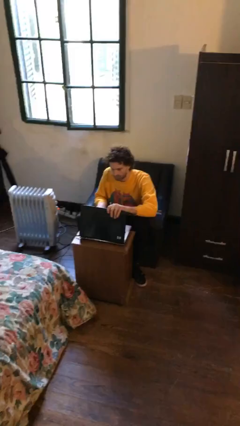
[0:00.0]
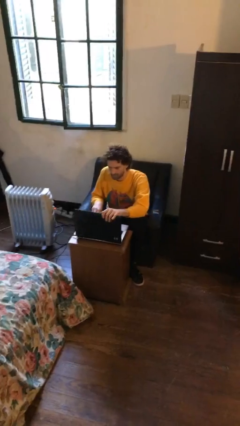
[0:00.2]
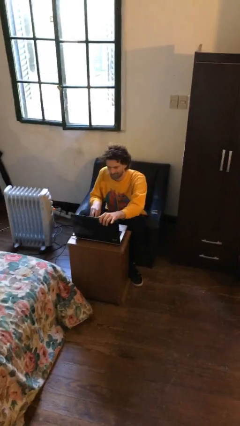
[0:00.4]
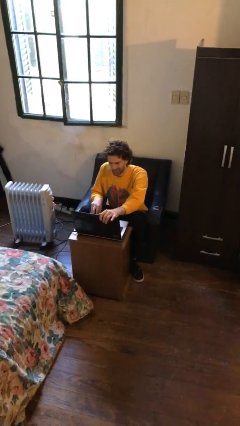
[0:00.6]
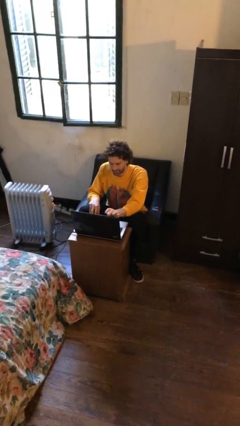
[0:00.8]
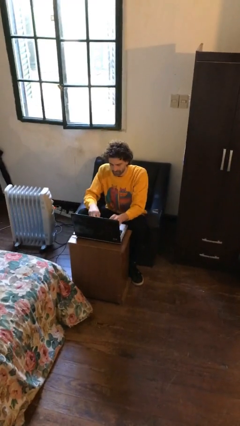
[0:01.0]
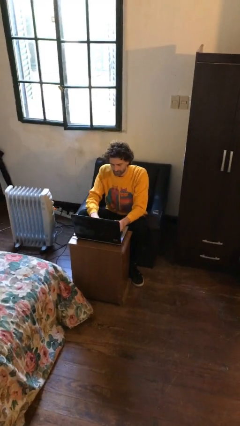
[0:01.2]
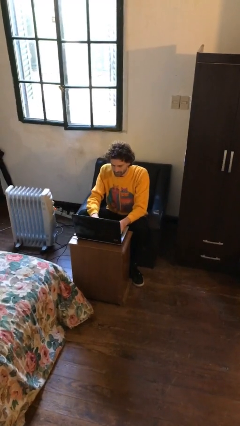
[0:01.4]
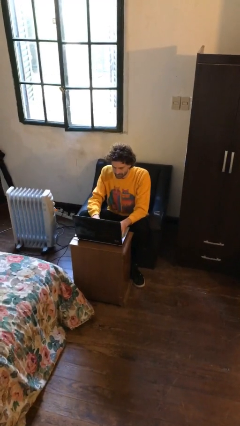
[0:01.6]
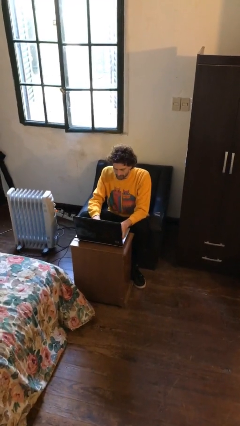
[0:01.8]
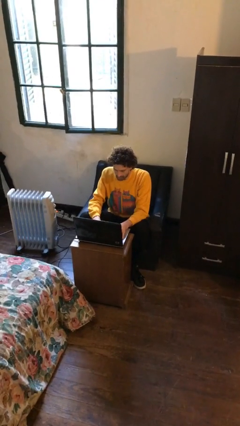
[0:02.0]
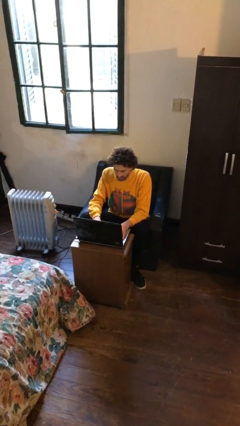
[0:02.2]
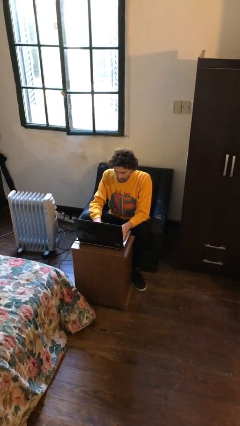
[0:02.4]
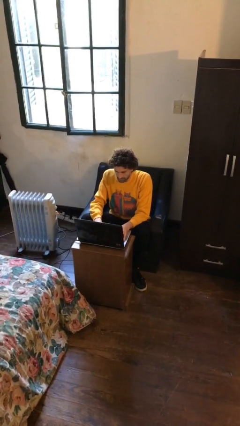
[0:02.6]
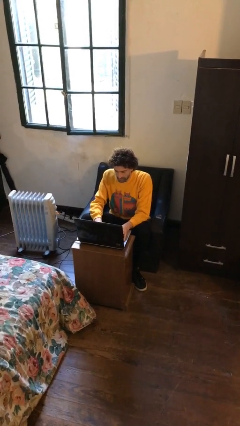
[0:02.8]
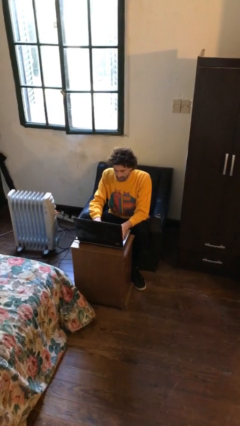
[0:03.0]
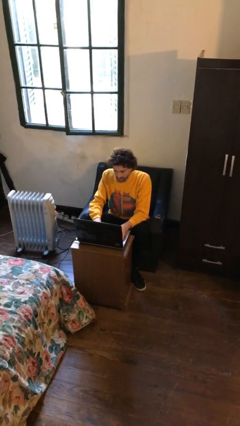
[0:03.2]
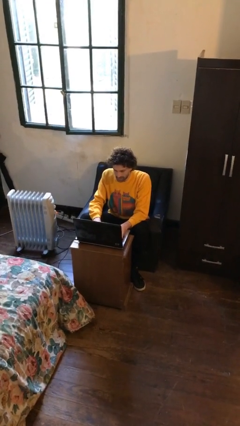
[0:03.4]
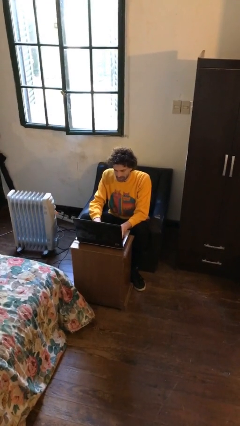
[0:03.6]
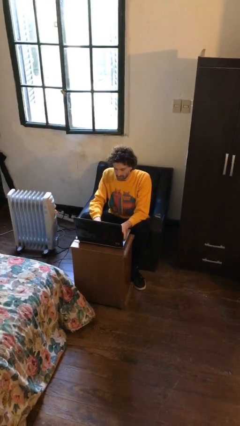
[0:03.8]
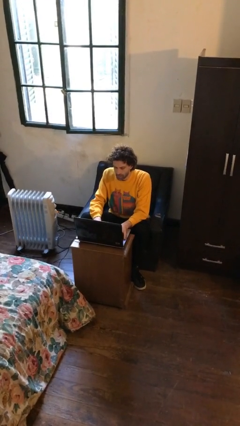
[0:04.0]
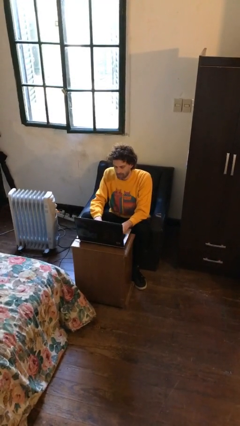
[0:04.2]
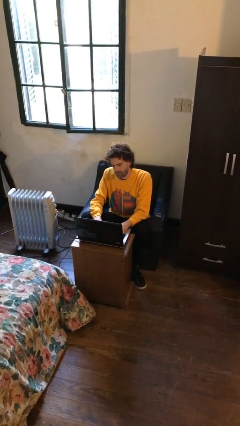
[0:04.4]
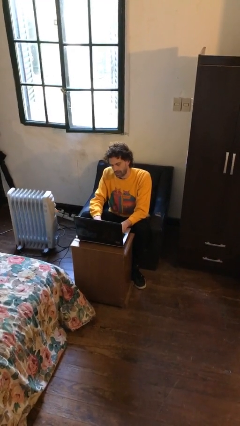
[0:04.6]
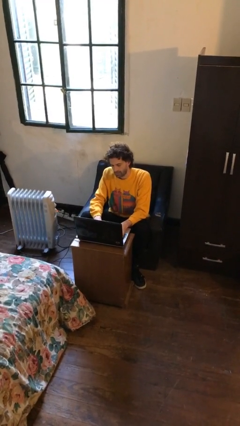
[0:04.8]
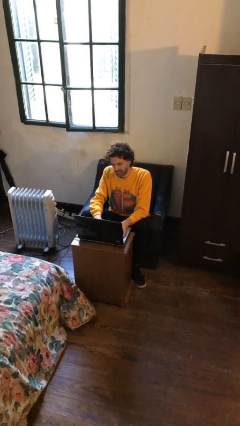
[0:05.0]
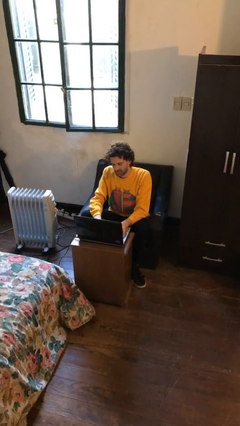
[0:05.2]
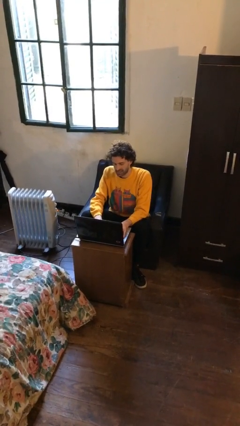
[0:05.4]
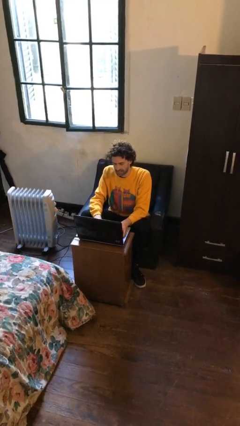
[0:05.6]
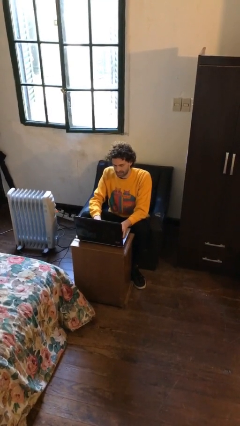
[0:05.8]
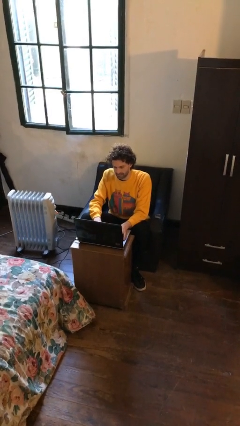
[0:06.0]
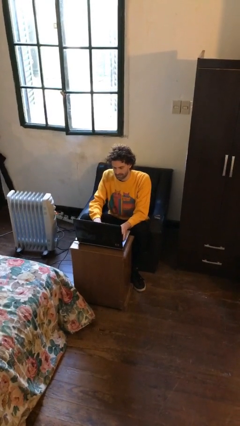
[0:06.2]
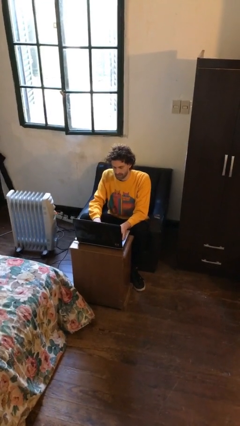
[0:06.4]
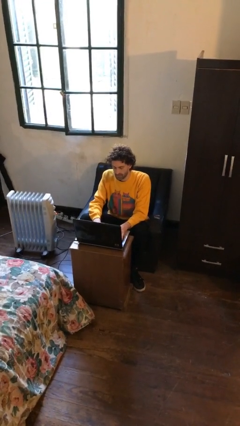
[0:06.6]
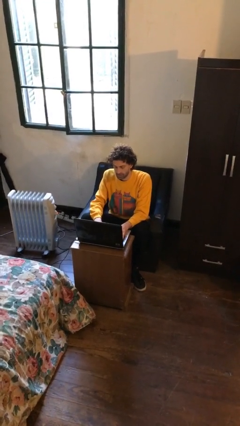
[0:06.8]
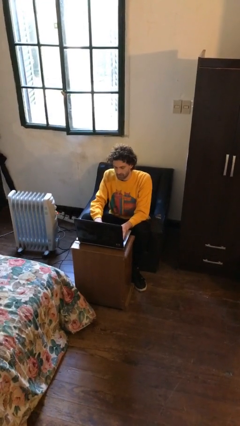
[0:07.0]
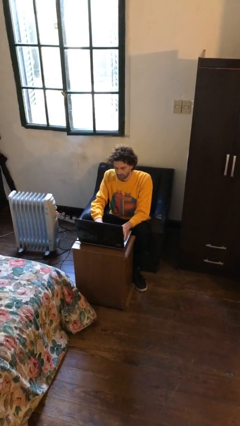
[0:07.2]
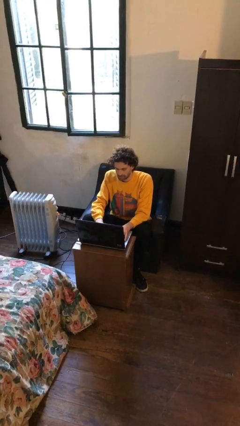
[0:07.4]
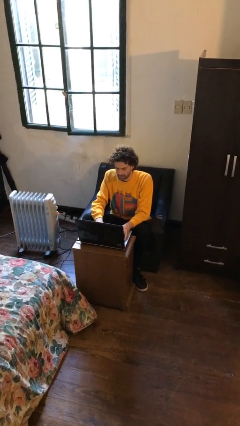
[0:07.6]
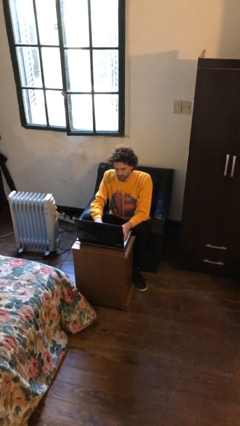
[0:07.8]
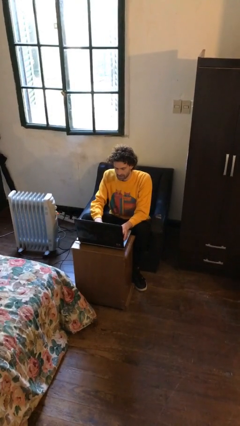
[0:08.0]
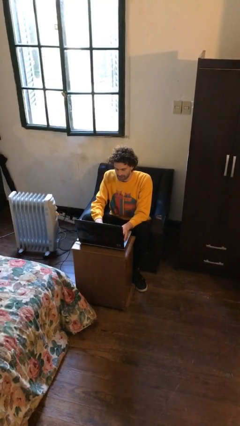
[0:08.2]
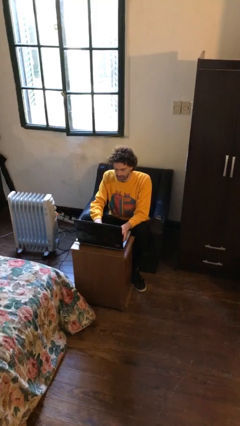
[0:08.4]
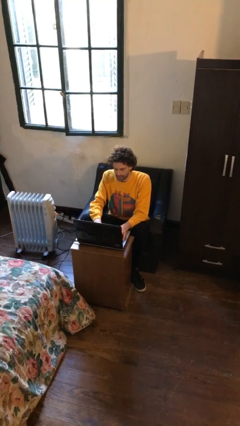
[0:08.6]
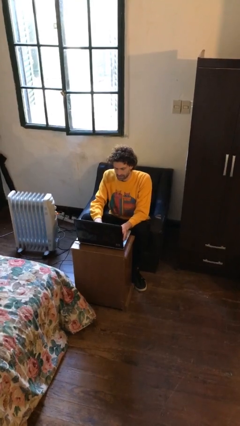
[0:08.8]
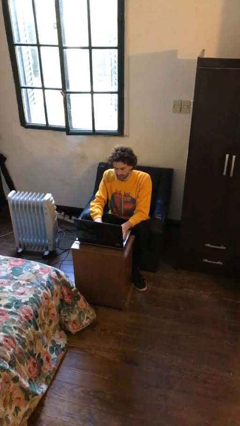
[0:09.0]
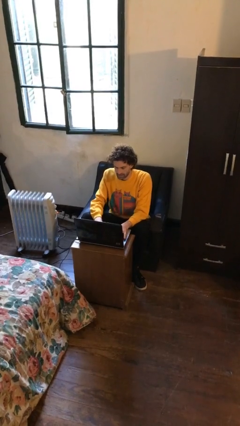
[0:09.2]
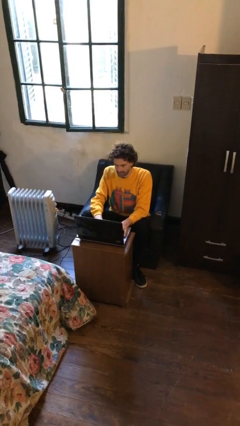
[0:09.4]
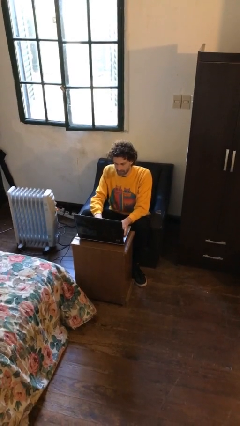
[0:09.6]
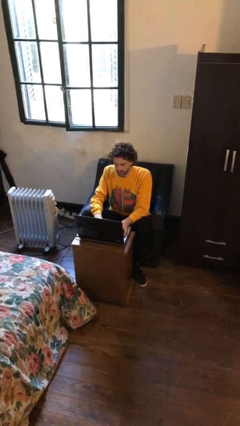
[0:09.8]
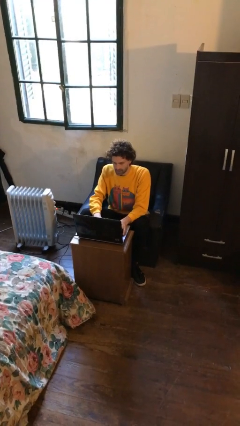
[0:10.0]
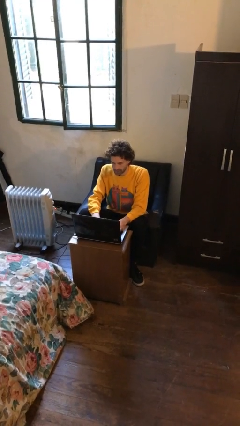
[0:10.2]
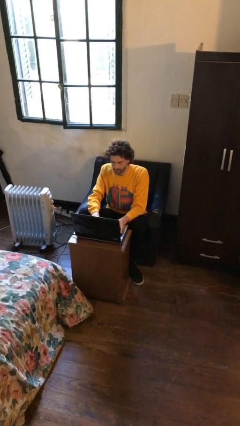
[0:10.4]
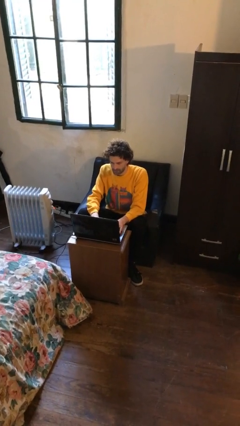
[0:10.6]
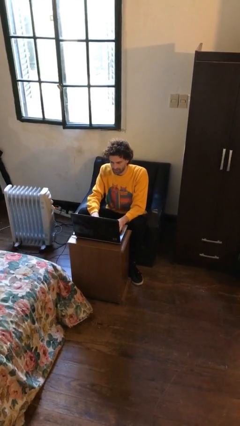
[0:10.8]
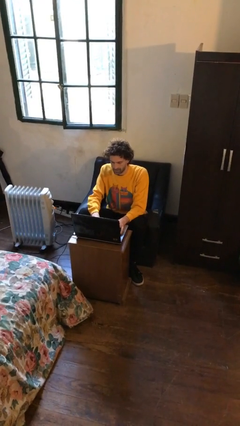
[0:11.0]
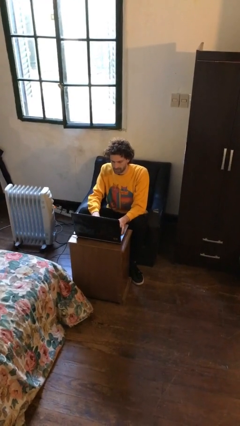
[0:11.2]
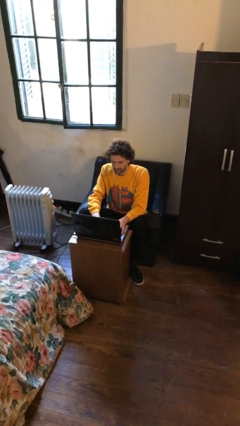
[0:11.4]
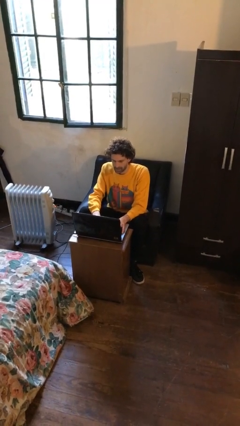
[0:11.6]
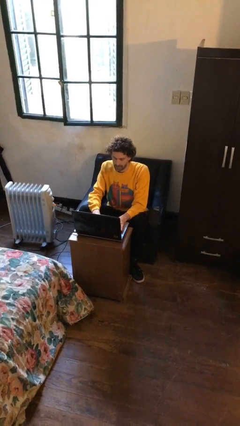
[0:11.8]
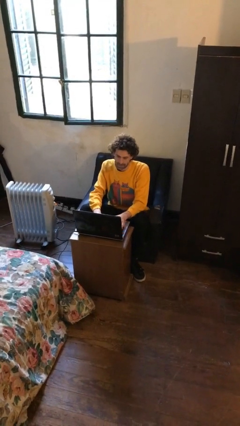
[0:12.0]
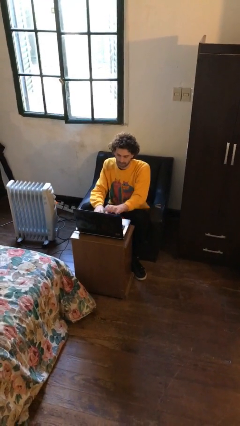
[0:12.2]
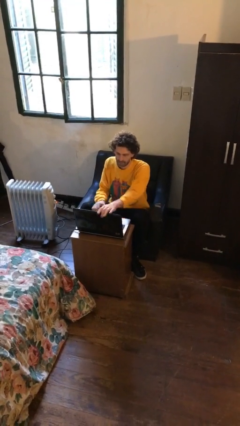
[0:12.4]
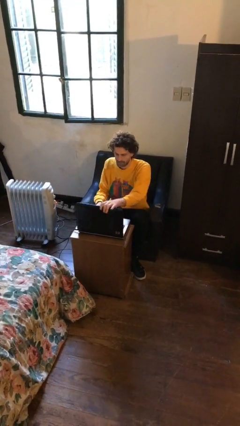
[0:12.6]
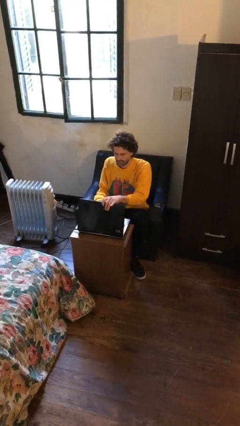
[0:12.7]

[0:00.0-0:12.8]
person interacts with laptop

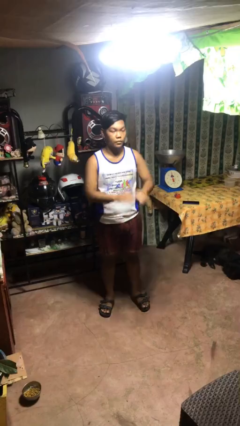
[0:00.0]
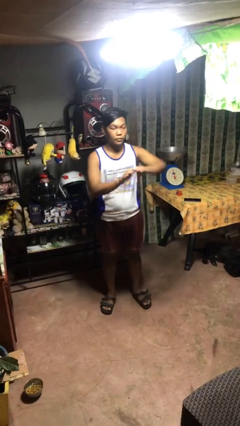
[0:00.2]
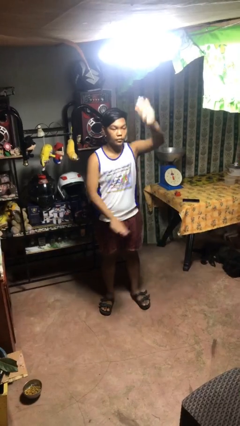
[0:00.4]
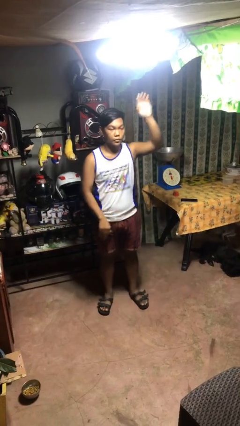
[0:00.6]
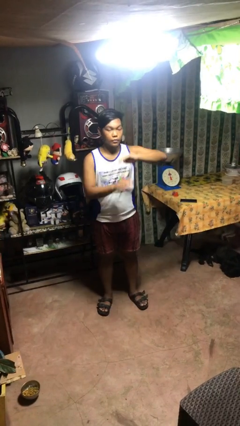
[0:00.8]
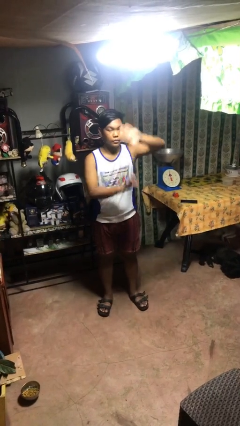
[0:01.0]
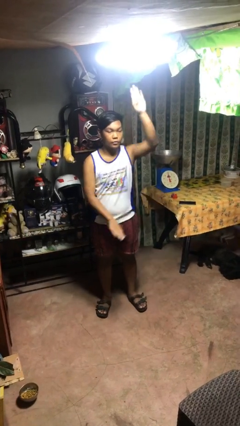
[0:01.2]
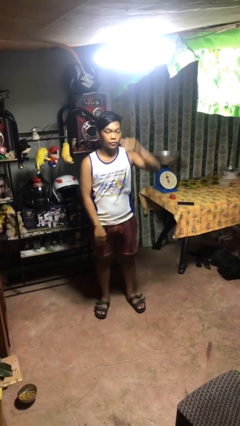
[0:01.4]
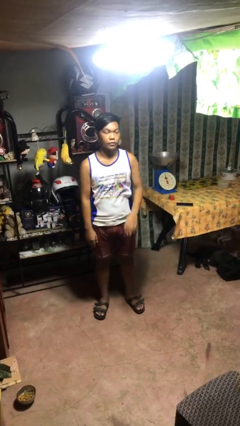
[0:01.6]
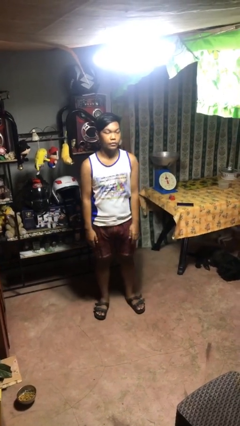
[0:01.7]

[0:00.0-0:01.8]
person gestures zoom in

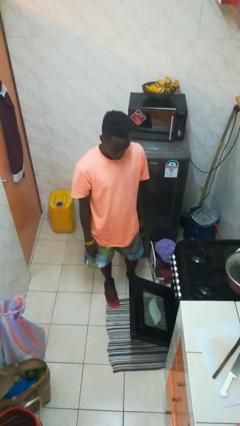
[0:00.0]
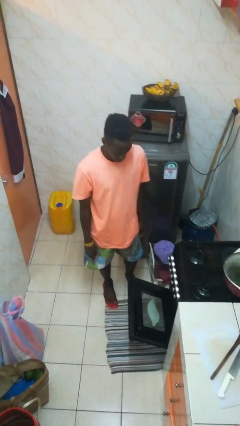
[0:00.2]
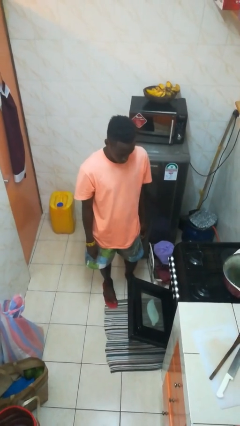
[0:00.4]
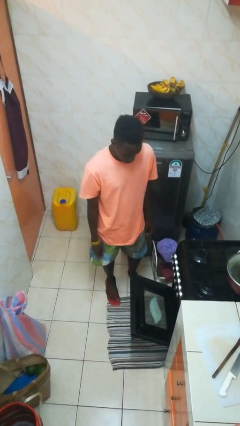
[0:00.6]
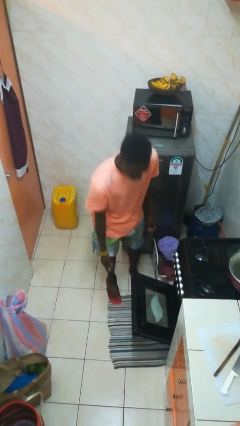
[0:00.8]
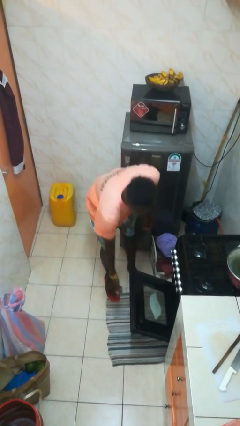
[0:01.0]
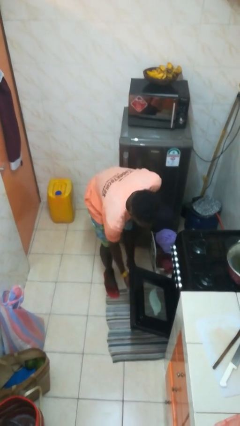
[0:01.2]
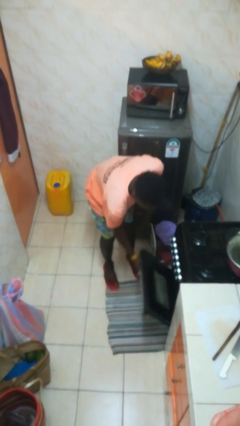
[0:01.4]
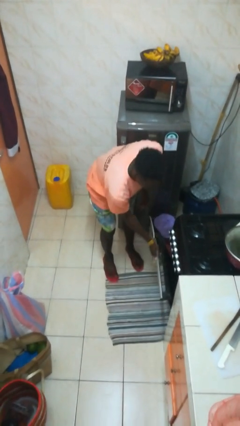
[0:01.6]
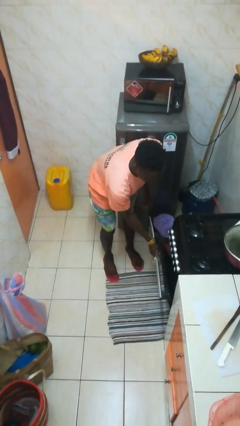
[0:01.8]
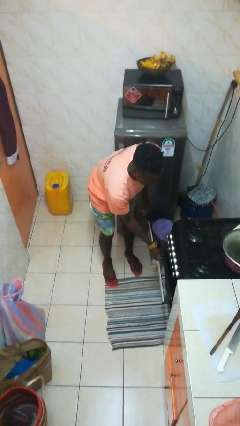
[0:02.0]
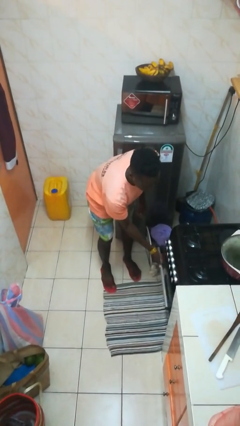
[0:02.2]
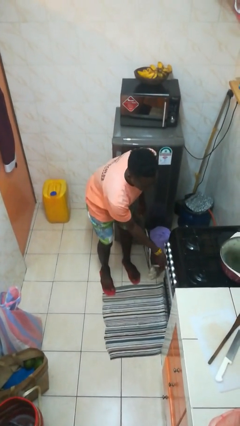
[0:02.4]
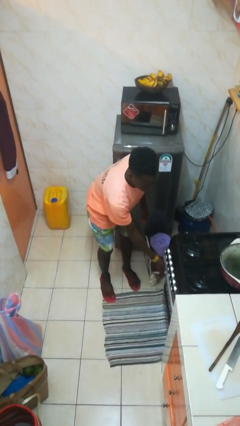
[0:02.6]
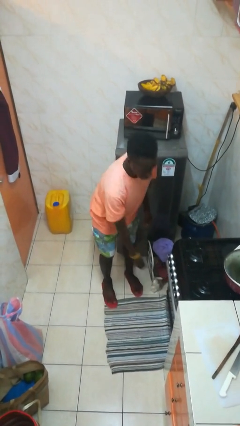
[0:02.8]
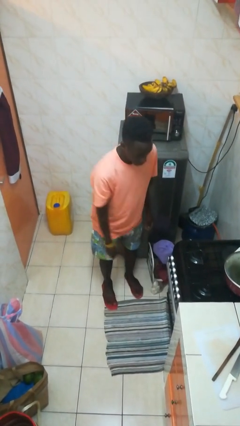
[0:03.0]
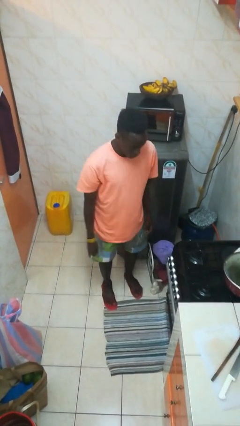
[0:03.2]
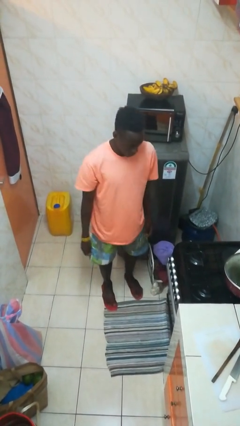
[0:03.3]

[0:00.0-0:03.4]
person closes oven door
